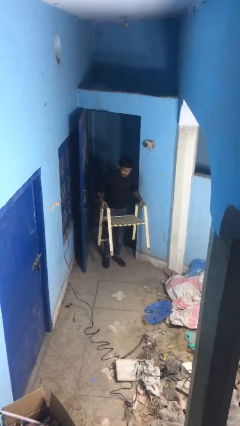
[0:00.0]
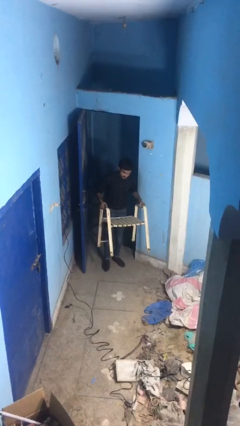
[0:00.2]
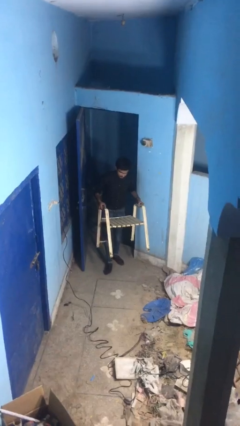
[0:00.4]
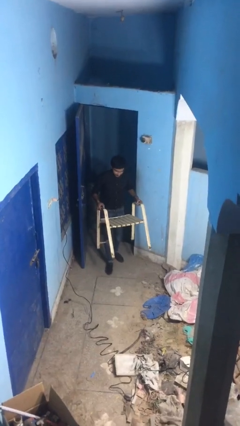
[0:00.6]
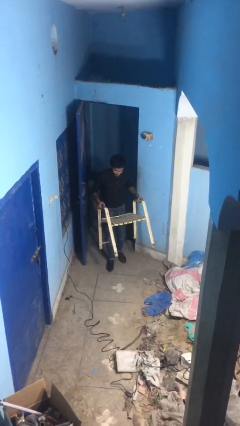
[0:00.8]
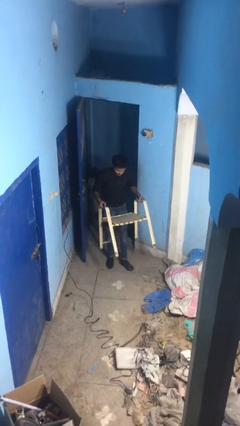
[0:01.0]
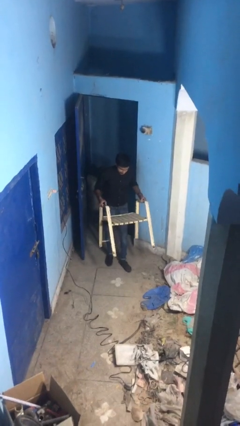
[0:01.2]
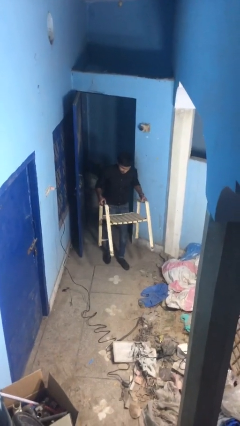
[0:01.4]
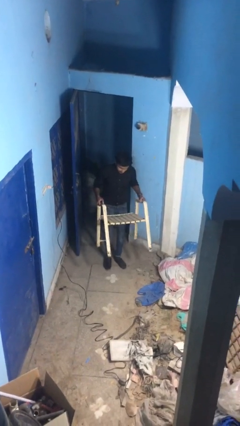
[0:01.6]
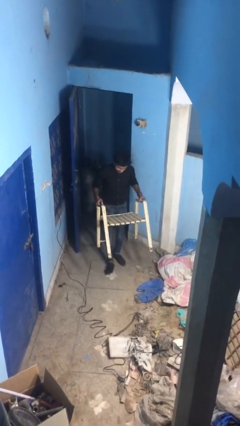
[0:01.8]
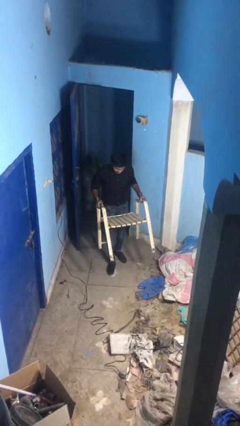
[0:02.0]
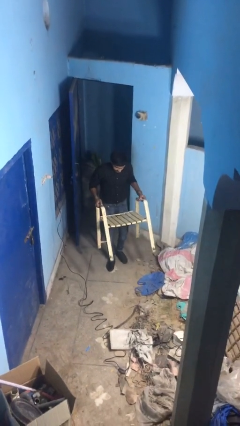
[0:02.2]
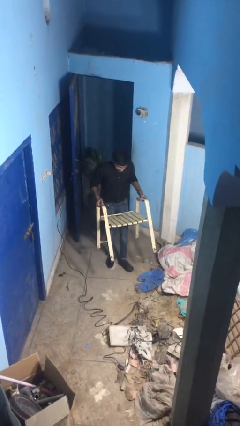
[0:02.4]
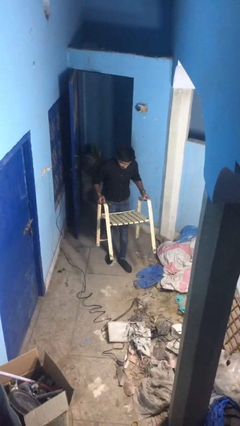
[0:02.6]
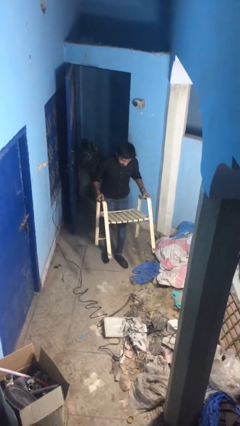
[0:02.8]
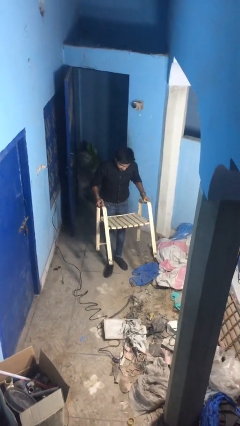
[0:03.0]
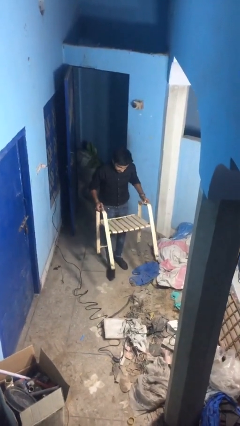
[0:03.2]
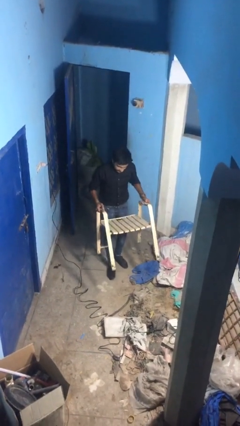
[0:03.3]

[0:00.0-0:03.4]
person carries heavy object

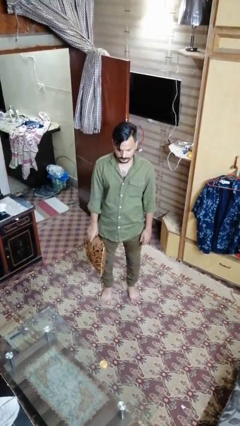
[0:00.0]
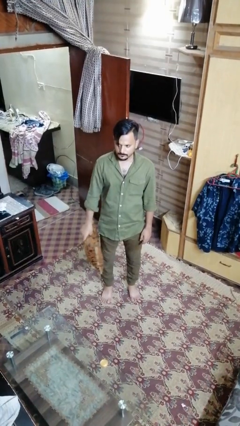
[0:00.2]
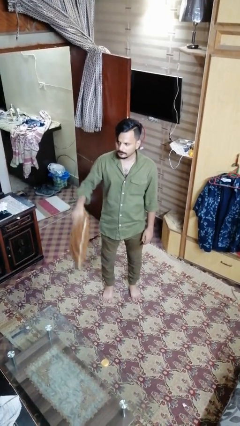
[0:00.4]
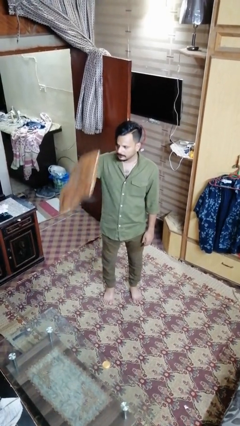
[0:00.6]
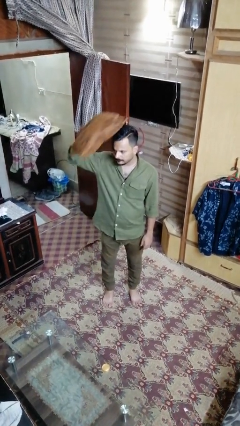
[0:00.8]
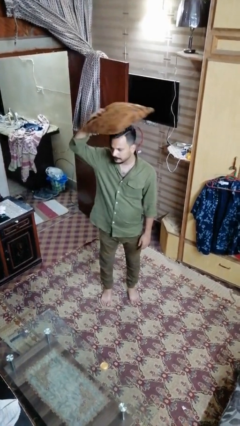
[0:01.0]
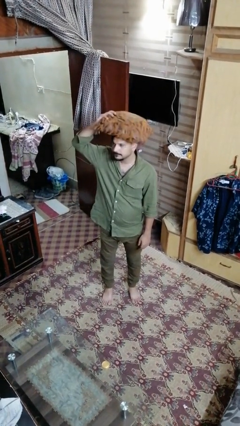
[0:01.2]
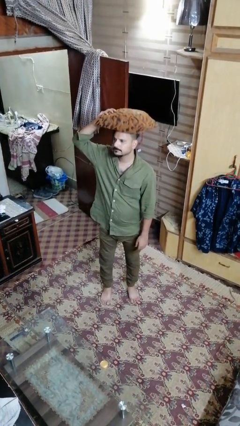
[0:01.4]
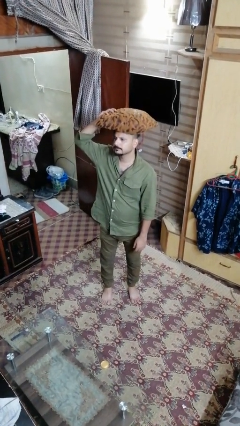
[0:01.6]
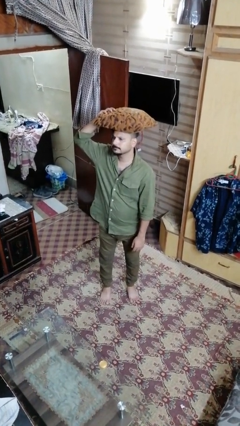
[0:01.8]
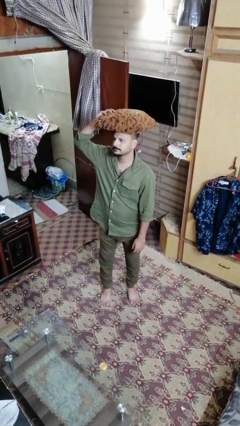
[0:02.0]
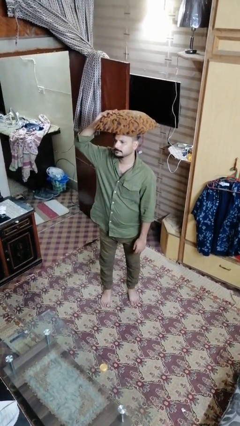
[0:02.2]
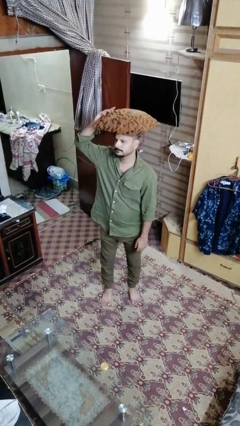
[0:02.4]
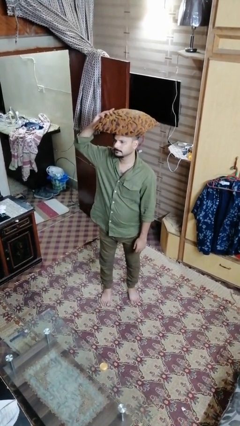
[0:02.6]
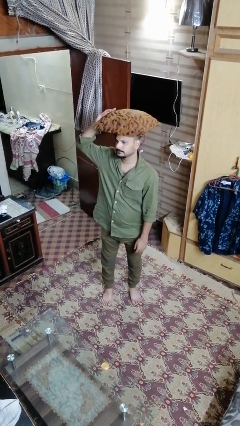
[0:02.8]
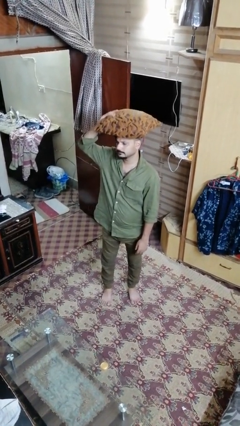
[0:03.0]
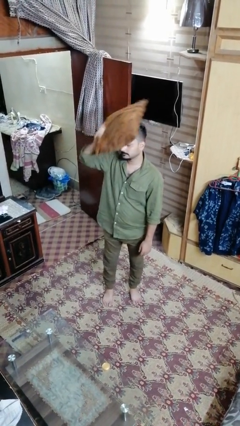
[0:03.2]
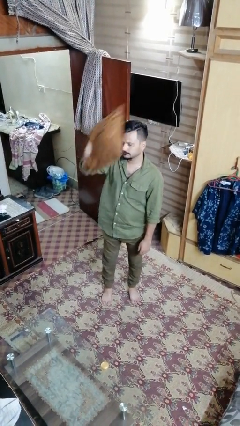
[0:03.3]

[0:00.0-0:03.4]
person holds object above head

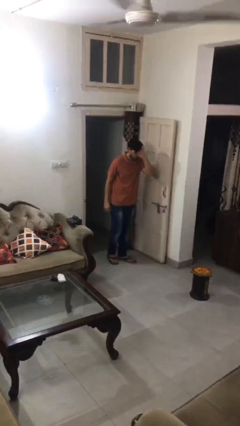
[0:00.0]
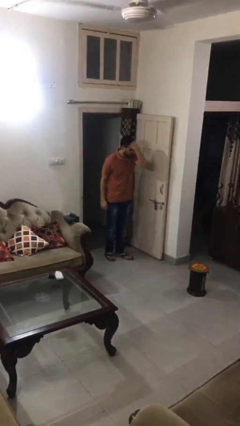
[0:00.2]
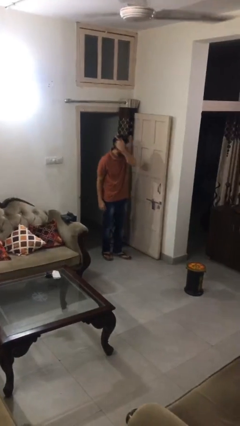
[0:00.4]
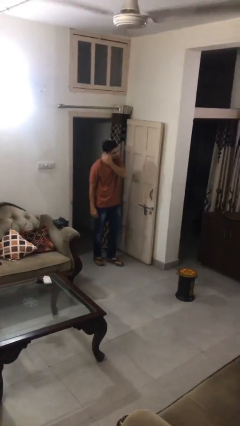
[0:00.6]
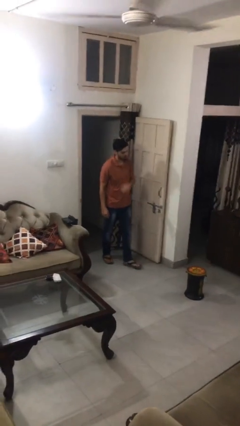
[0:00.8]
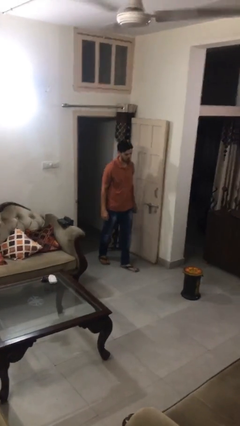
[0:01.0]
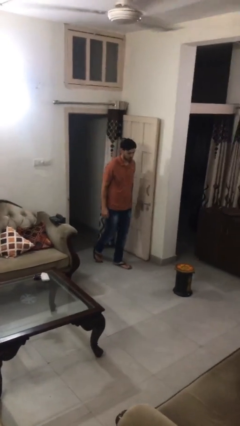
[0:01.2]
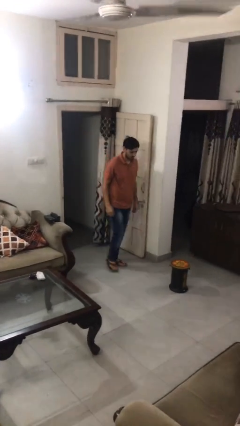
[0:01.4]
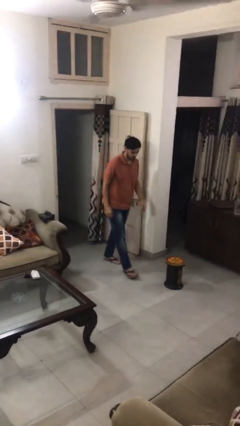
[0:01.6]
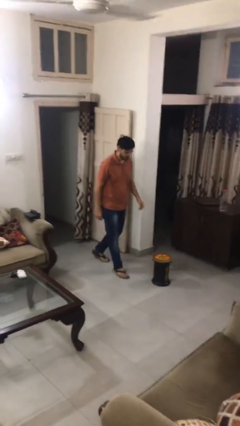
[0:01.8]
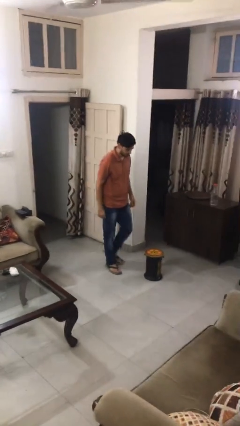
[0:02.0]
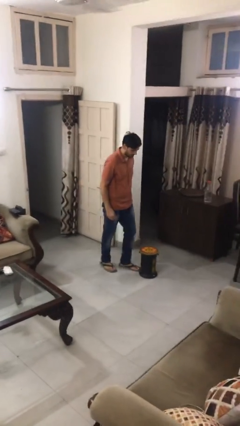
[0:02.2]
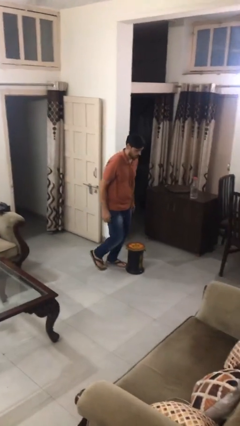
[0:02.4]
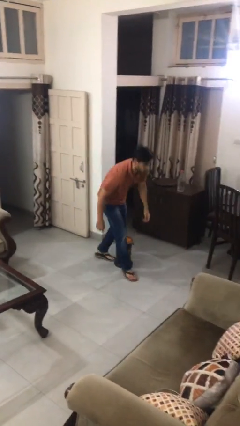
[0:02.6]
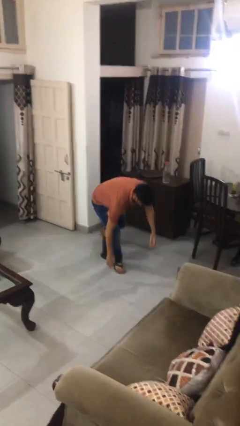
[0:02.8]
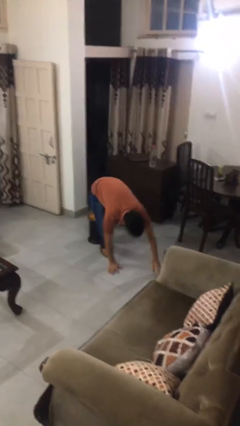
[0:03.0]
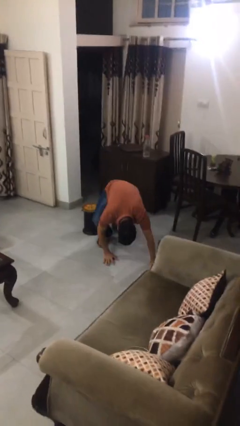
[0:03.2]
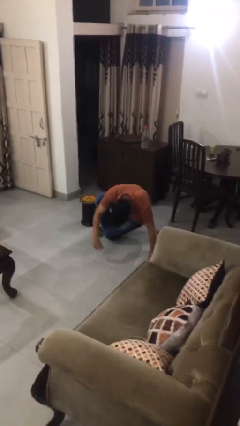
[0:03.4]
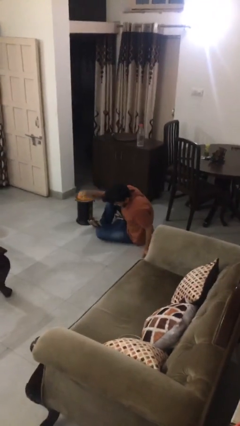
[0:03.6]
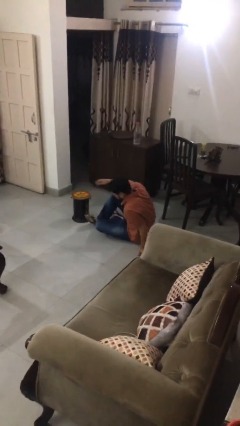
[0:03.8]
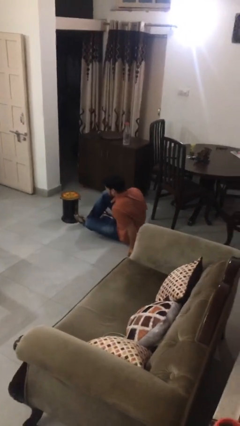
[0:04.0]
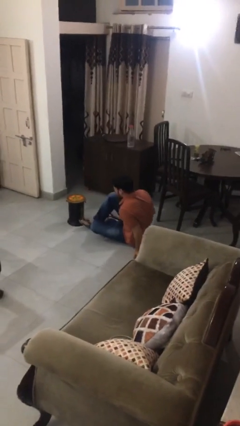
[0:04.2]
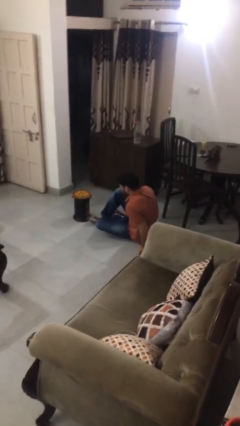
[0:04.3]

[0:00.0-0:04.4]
person trips on object on floor

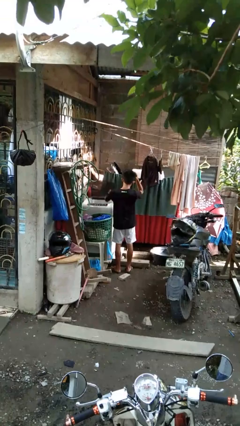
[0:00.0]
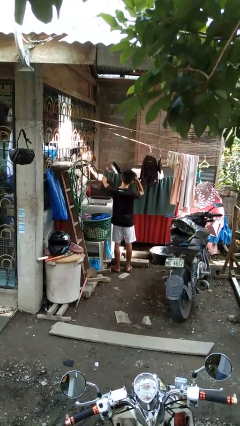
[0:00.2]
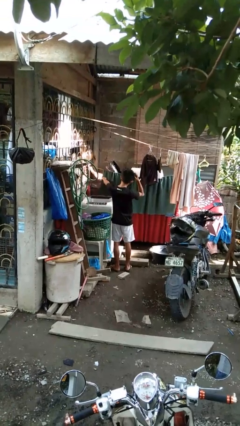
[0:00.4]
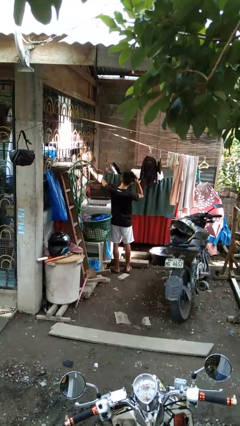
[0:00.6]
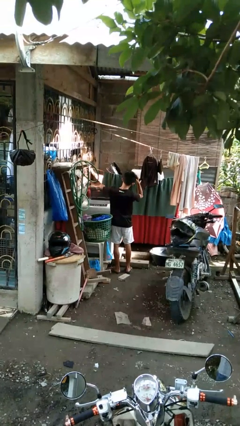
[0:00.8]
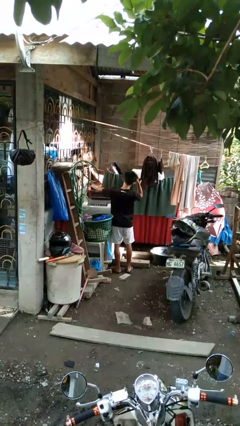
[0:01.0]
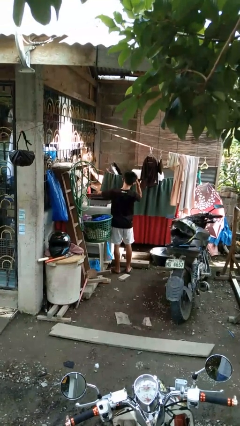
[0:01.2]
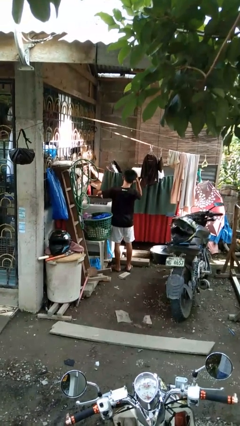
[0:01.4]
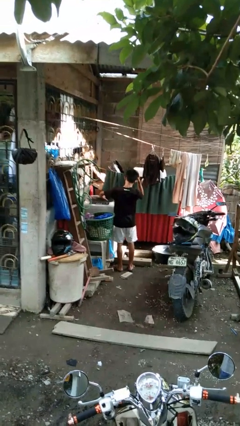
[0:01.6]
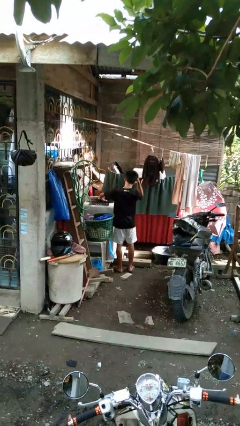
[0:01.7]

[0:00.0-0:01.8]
person closes clothes washer

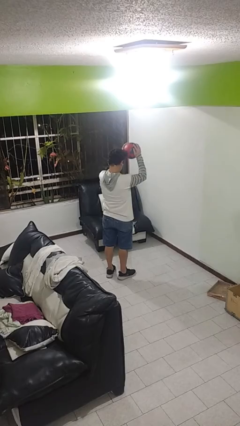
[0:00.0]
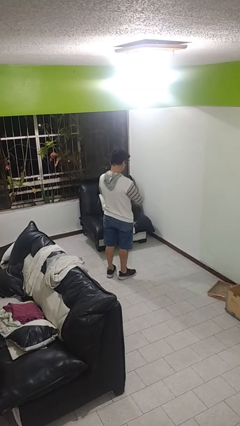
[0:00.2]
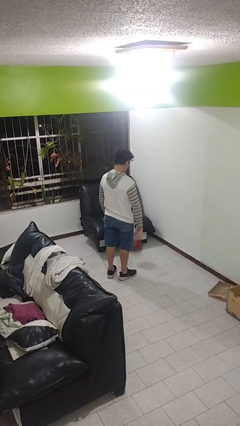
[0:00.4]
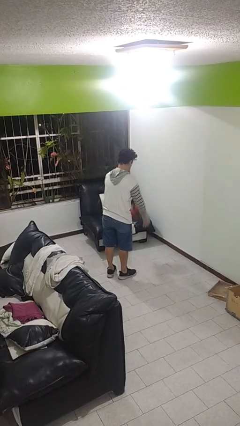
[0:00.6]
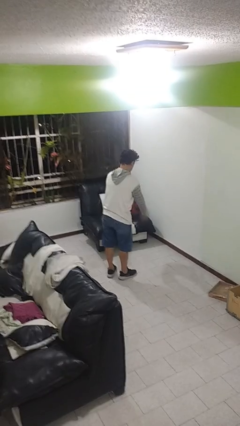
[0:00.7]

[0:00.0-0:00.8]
person bounces ball on floor

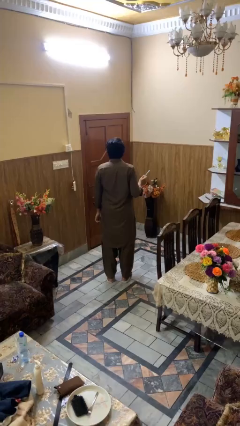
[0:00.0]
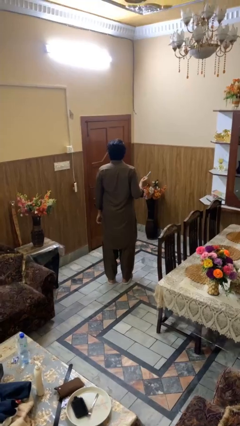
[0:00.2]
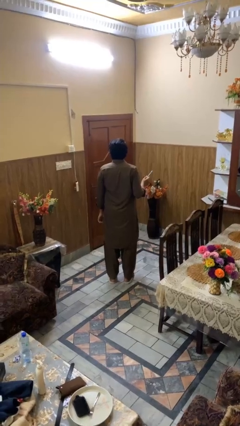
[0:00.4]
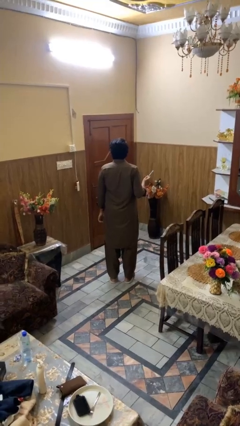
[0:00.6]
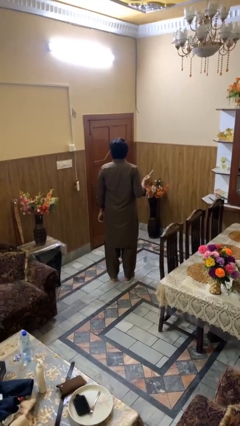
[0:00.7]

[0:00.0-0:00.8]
person brushes teeth

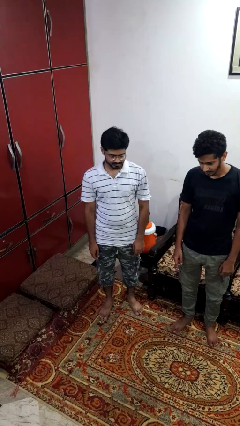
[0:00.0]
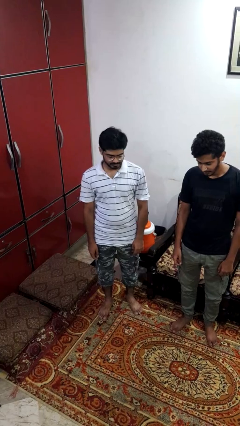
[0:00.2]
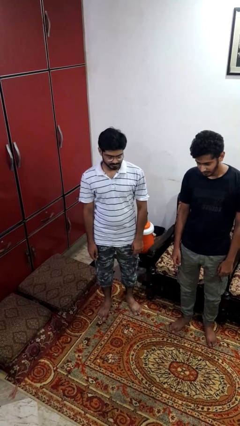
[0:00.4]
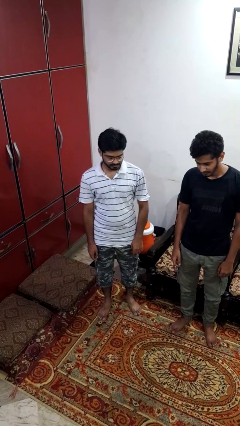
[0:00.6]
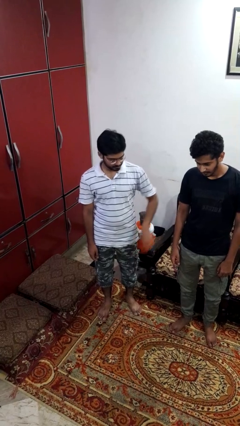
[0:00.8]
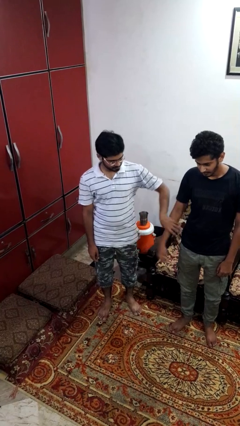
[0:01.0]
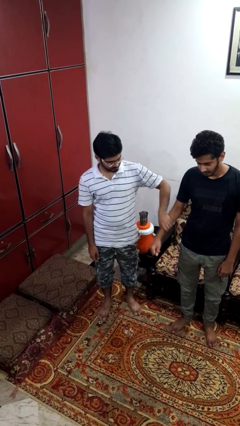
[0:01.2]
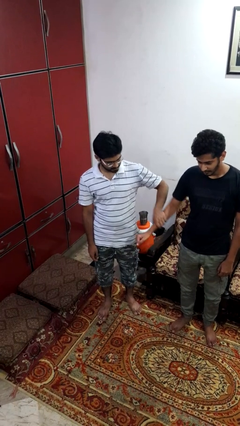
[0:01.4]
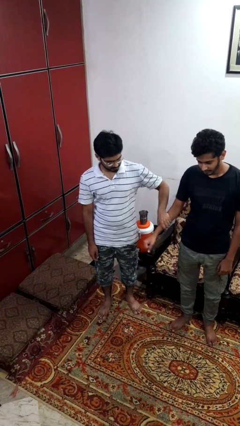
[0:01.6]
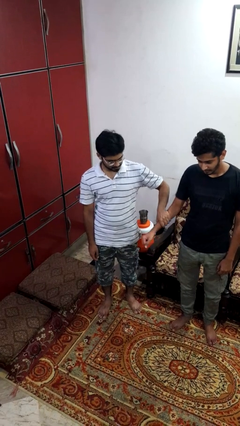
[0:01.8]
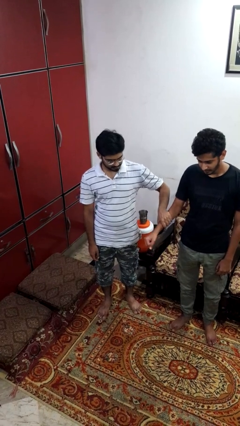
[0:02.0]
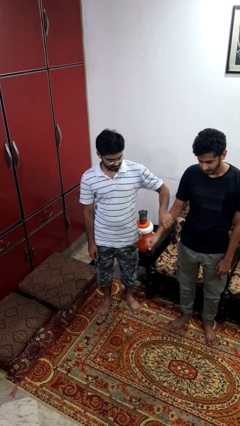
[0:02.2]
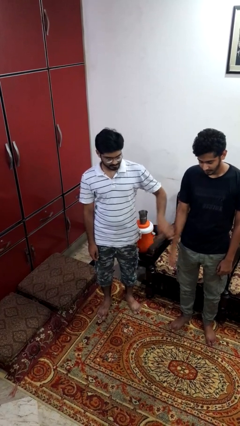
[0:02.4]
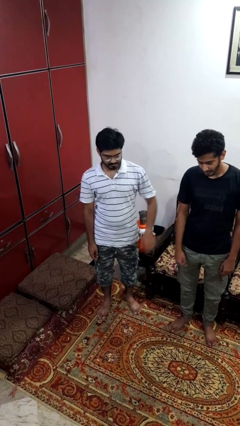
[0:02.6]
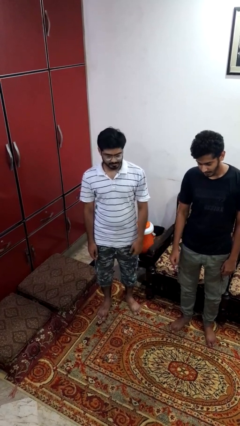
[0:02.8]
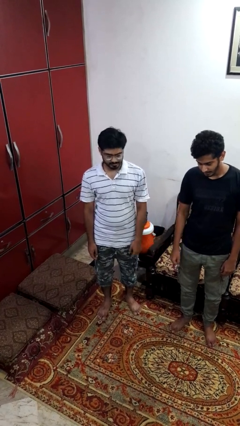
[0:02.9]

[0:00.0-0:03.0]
person grabs person by forearm

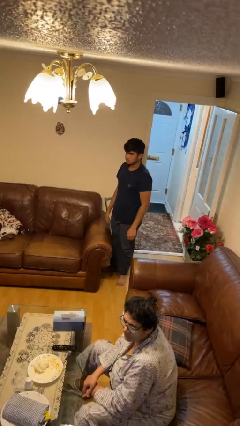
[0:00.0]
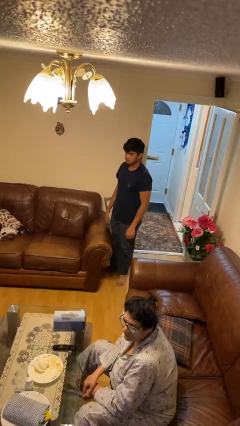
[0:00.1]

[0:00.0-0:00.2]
person searches in couch
